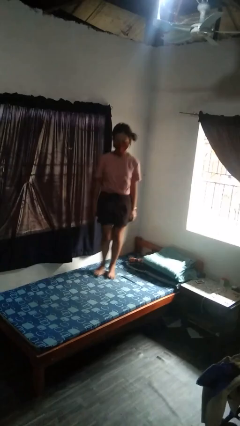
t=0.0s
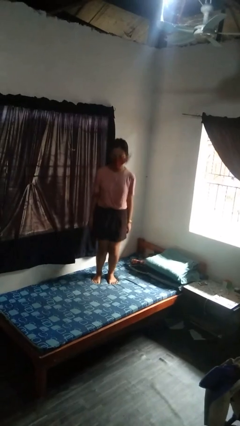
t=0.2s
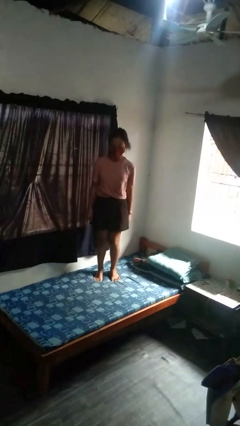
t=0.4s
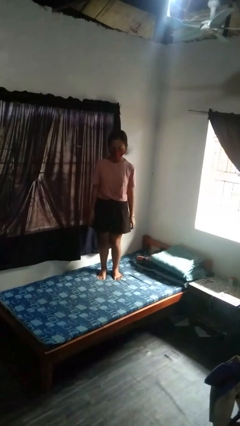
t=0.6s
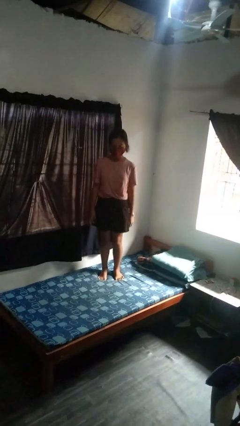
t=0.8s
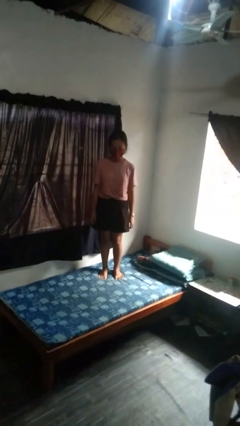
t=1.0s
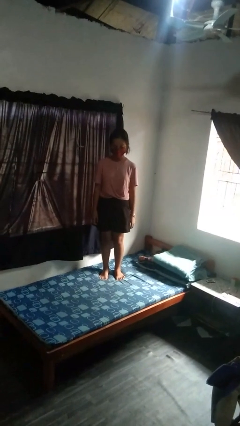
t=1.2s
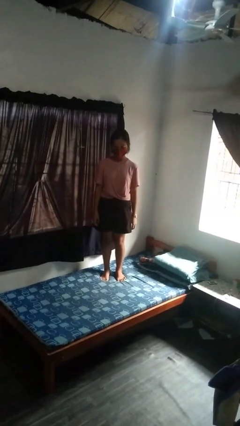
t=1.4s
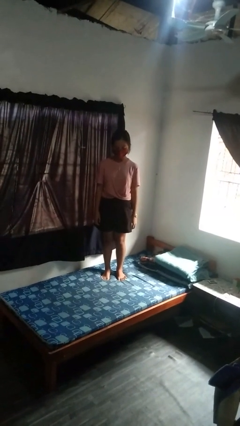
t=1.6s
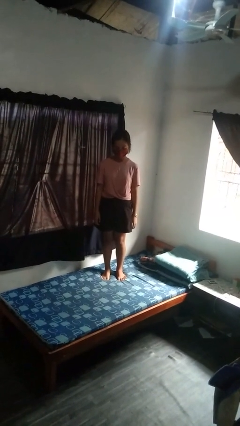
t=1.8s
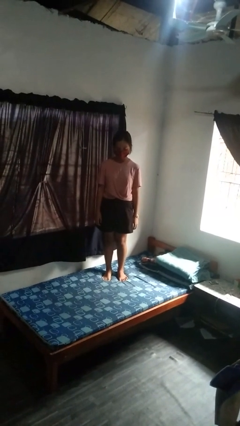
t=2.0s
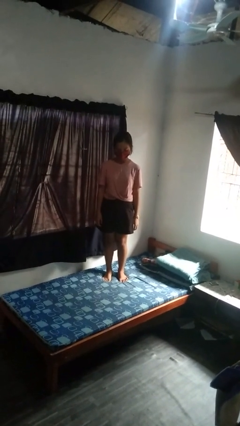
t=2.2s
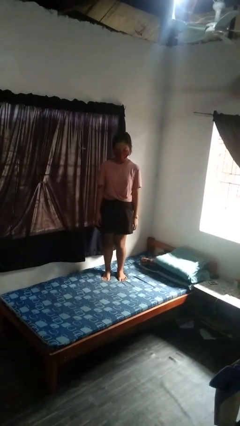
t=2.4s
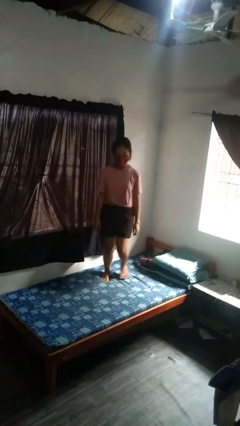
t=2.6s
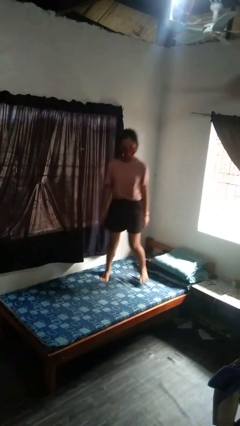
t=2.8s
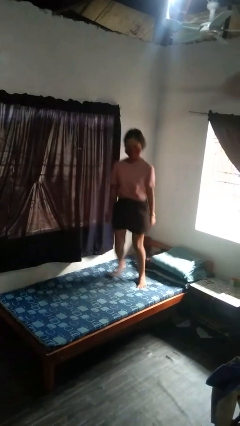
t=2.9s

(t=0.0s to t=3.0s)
person jumps on bed

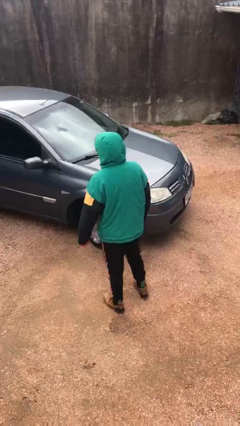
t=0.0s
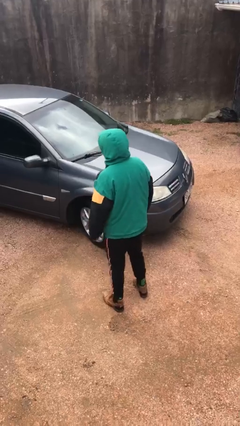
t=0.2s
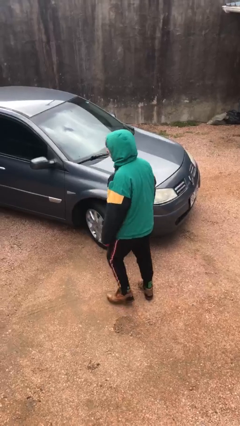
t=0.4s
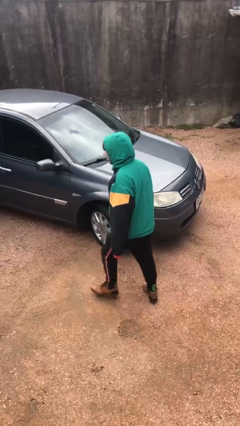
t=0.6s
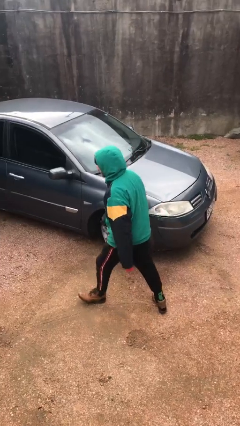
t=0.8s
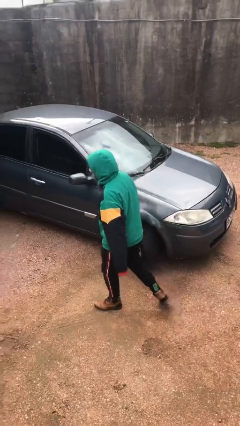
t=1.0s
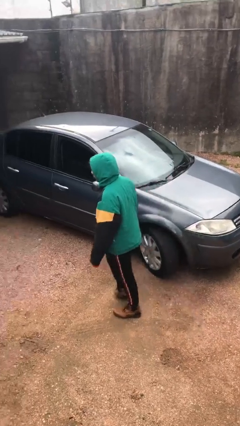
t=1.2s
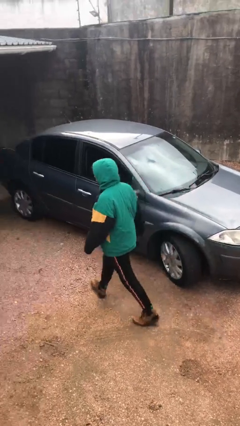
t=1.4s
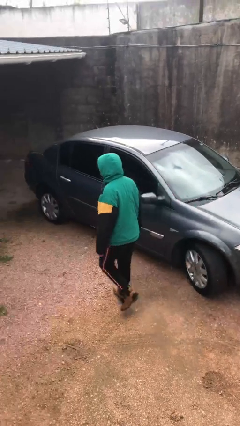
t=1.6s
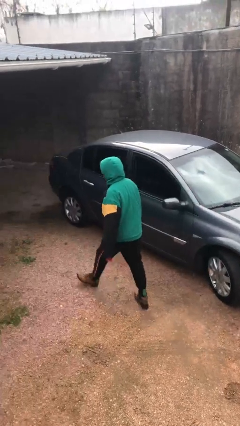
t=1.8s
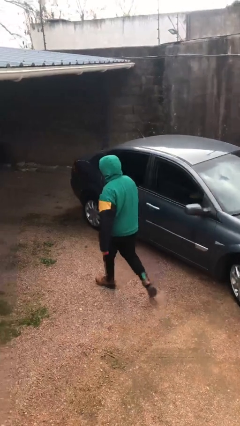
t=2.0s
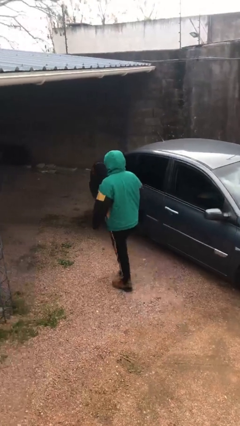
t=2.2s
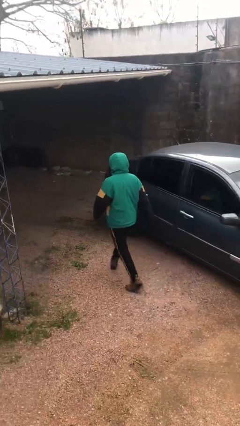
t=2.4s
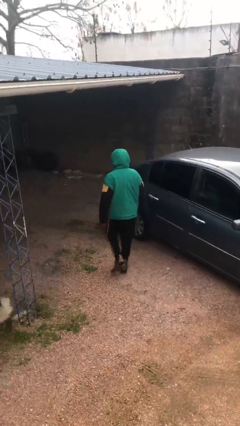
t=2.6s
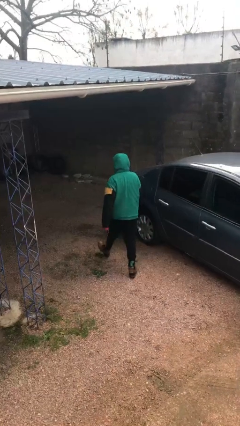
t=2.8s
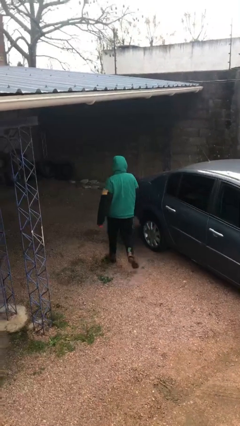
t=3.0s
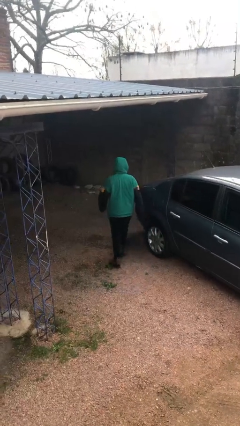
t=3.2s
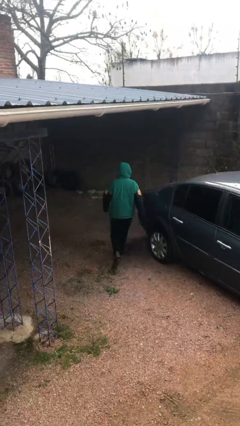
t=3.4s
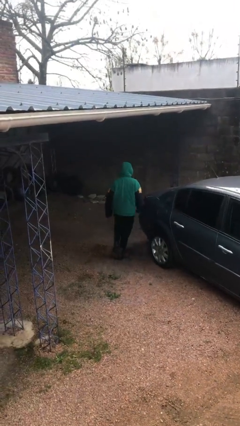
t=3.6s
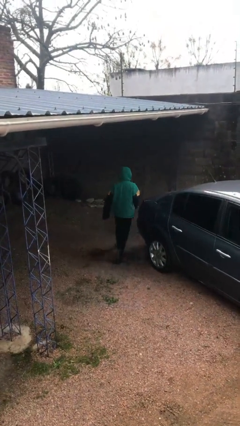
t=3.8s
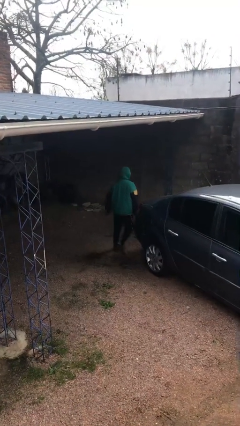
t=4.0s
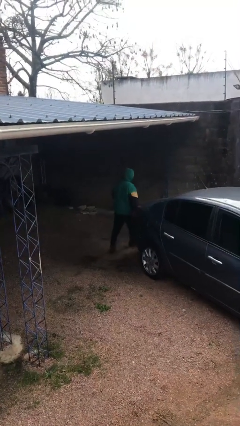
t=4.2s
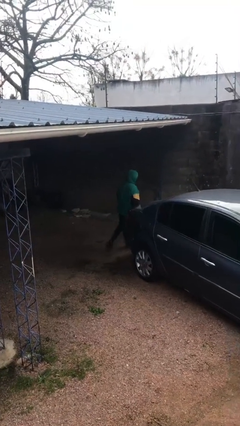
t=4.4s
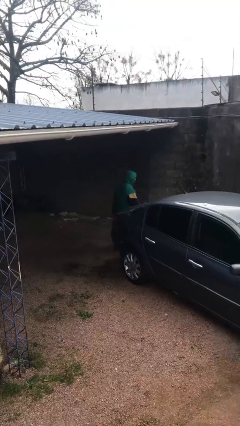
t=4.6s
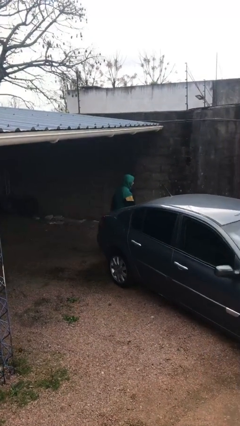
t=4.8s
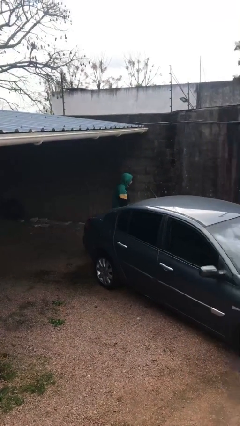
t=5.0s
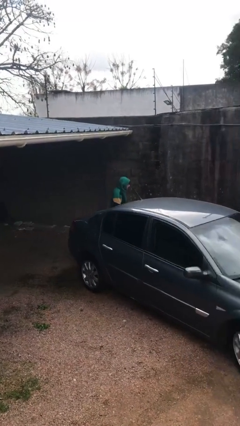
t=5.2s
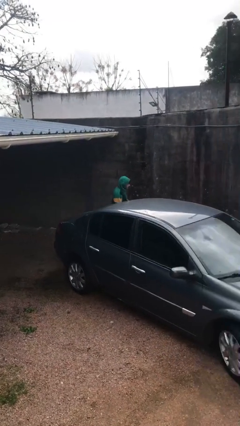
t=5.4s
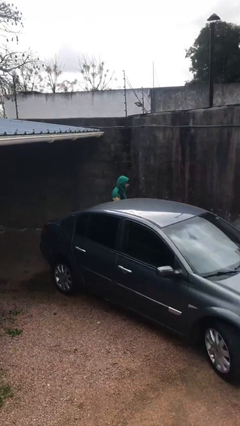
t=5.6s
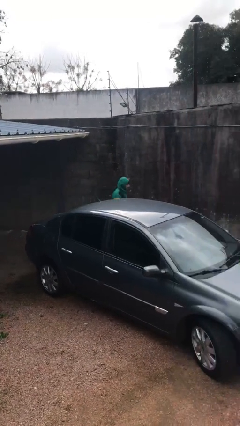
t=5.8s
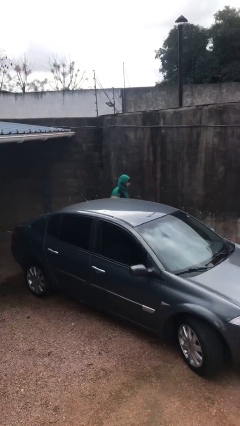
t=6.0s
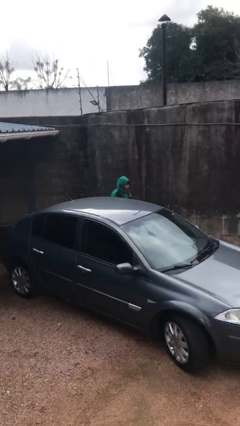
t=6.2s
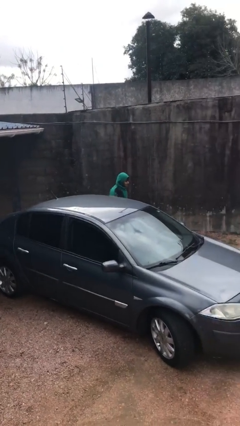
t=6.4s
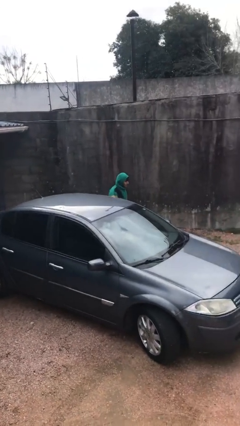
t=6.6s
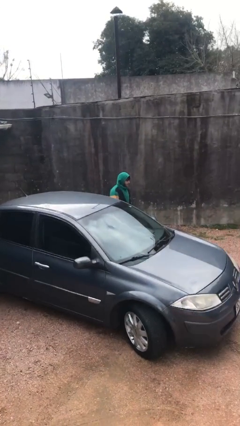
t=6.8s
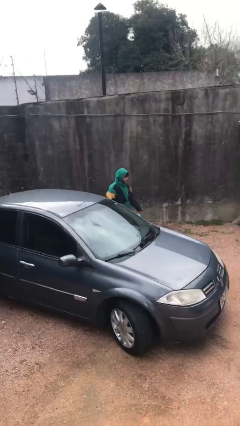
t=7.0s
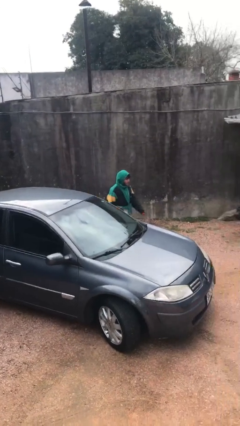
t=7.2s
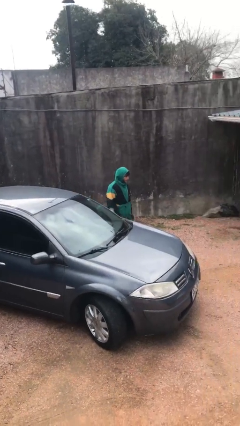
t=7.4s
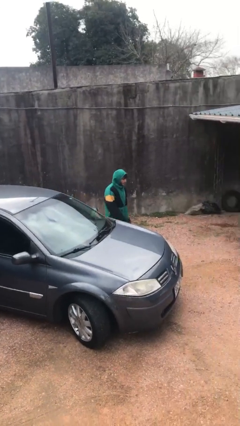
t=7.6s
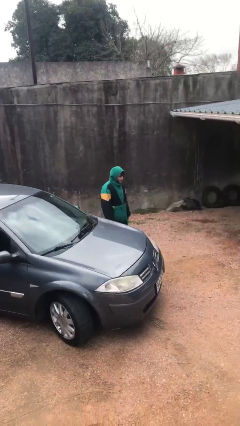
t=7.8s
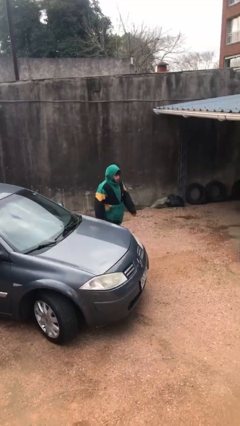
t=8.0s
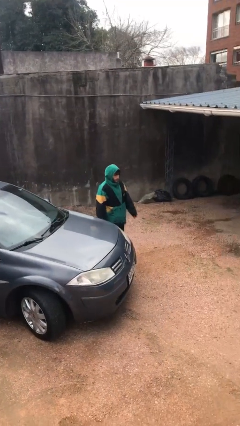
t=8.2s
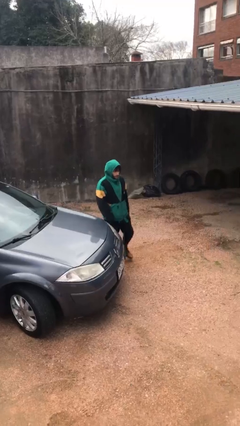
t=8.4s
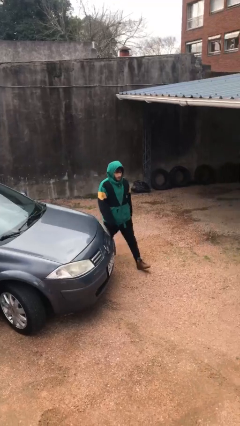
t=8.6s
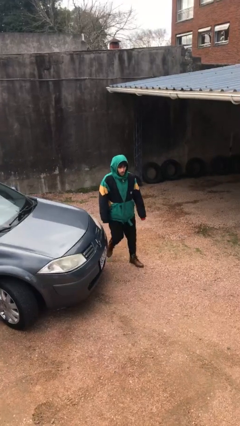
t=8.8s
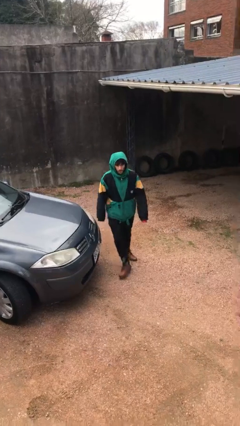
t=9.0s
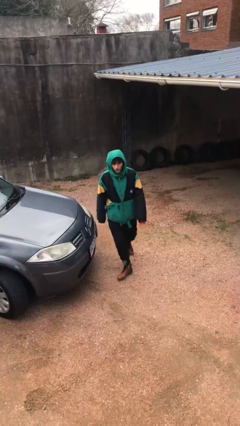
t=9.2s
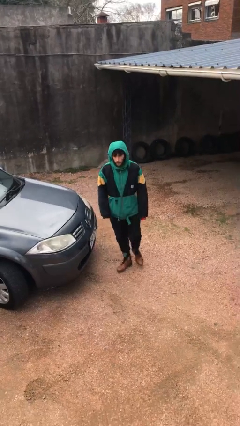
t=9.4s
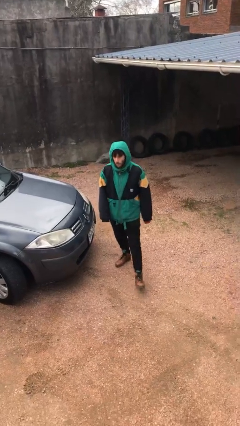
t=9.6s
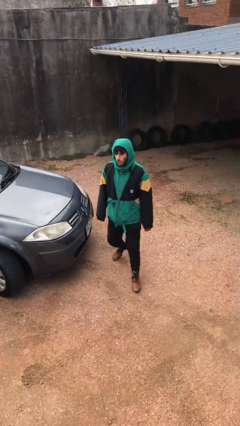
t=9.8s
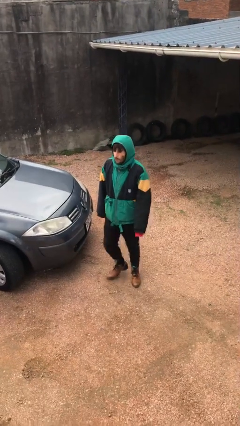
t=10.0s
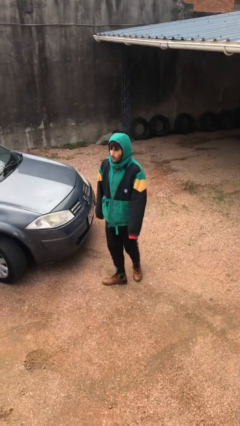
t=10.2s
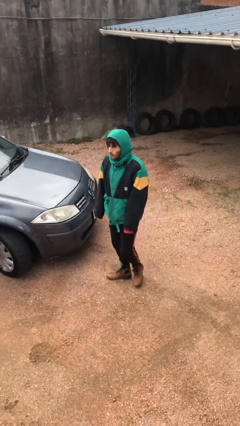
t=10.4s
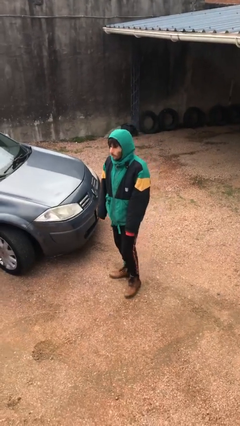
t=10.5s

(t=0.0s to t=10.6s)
person walks around car

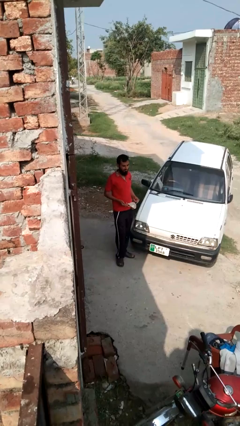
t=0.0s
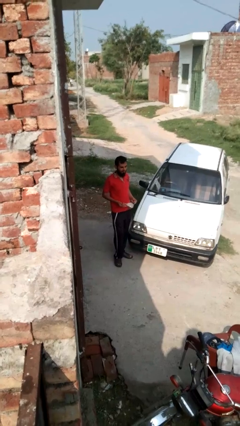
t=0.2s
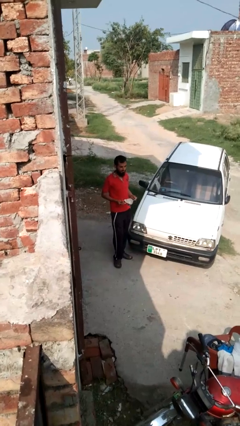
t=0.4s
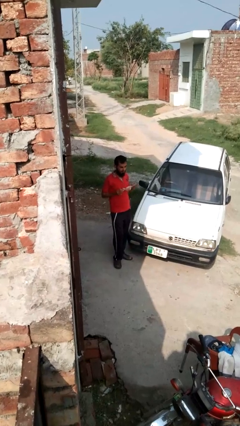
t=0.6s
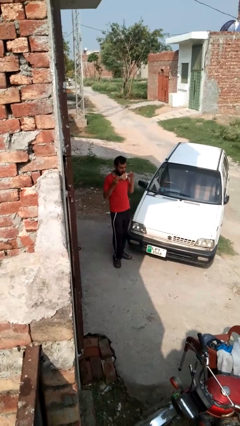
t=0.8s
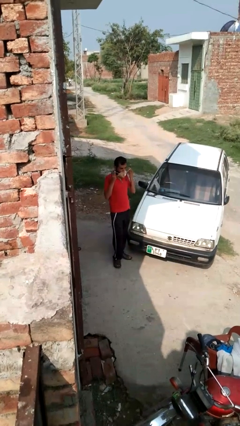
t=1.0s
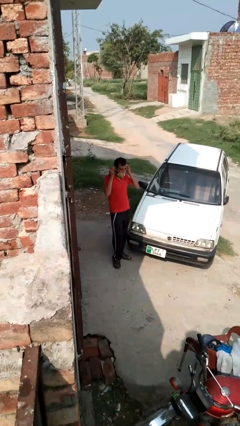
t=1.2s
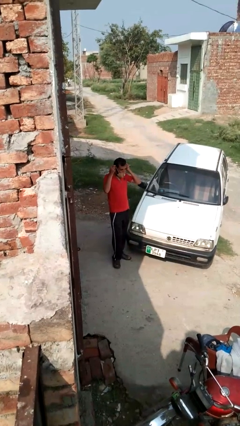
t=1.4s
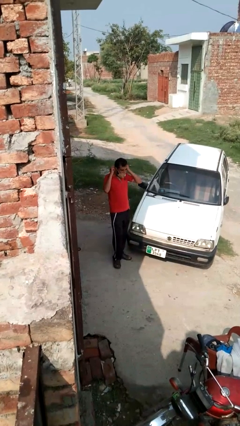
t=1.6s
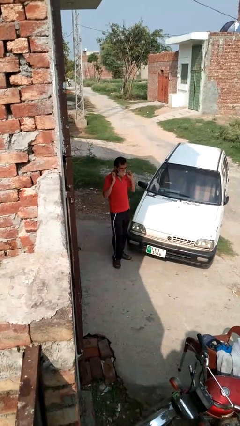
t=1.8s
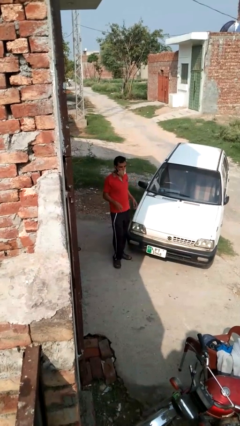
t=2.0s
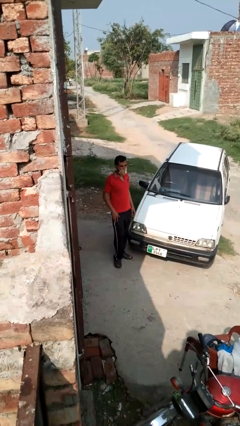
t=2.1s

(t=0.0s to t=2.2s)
person puts on facemask

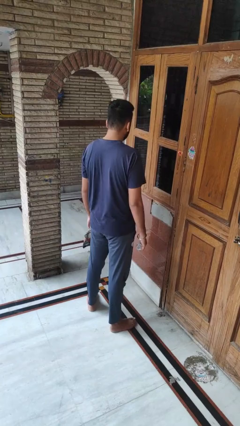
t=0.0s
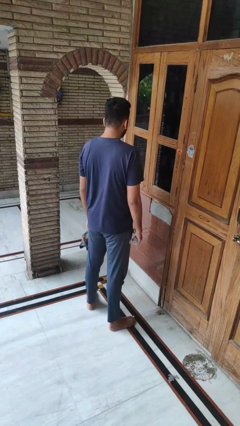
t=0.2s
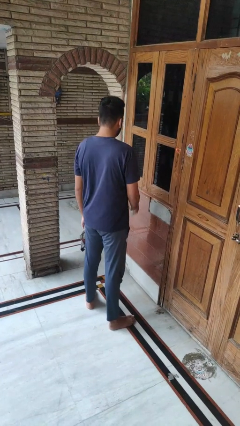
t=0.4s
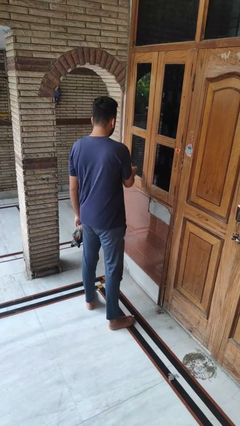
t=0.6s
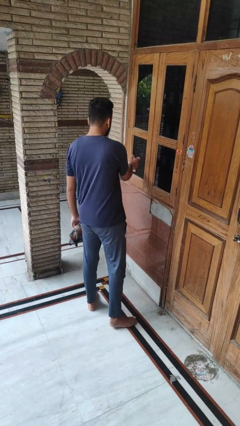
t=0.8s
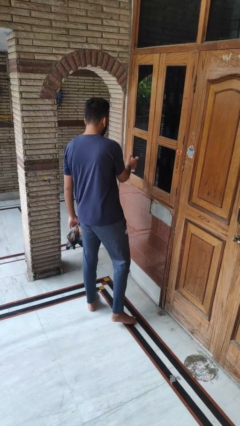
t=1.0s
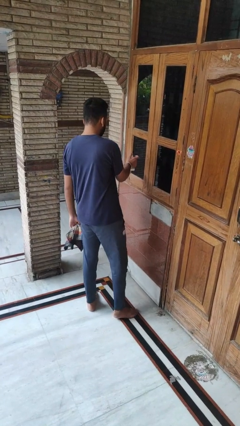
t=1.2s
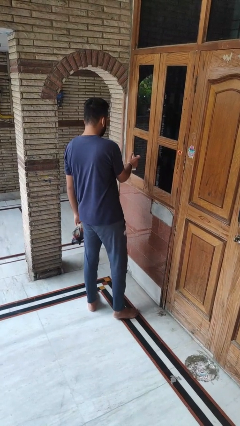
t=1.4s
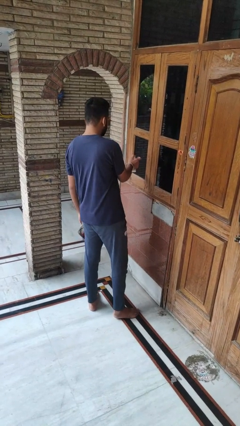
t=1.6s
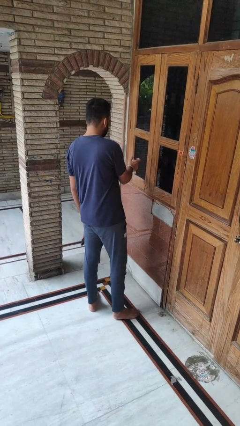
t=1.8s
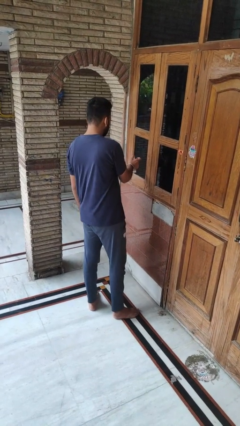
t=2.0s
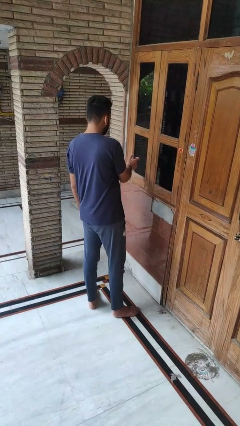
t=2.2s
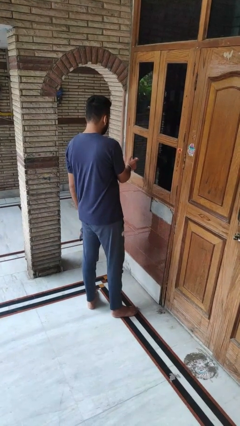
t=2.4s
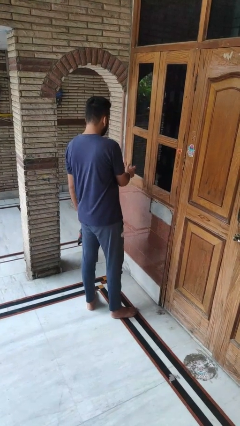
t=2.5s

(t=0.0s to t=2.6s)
person sprays from bottle
